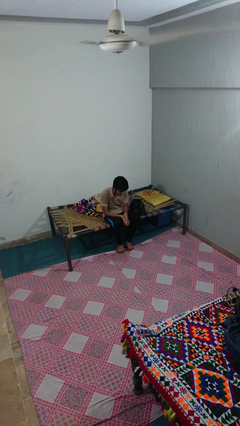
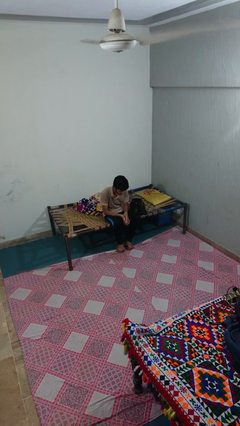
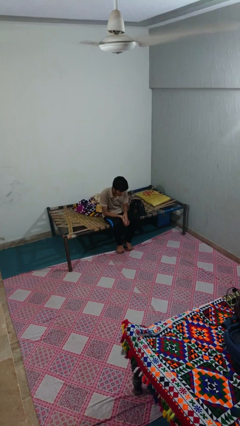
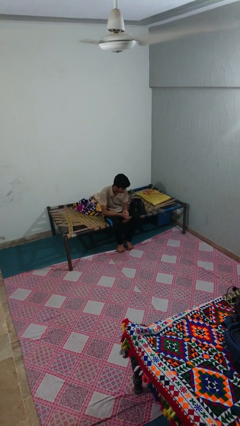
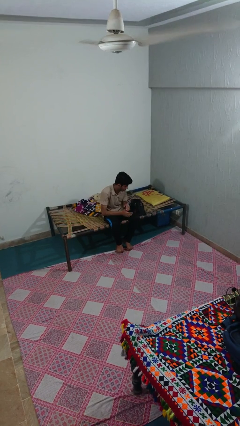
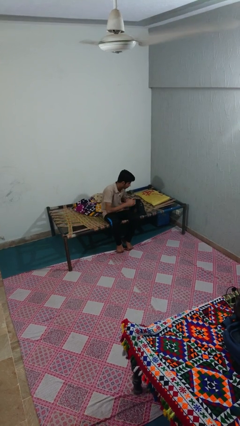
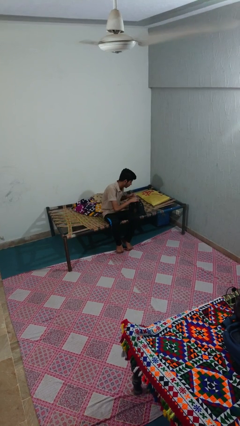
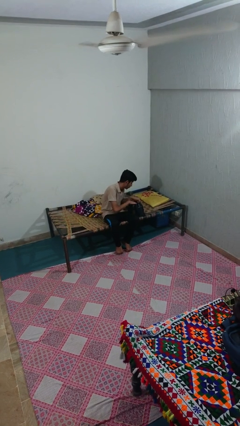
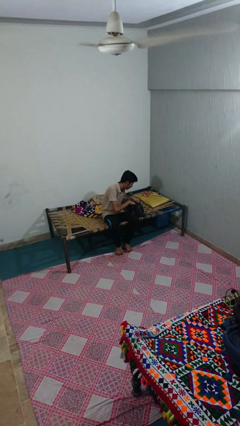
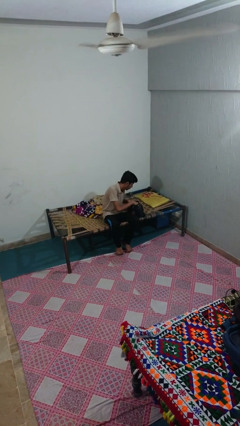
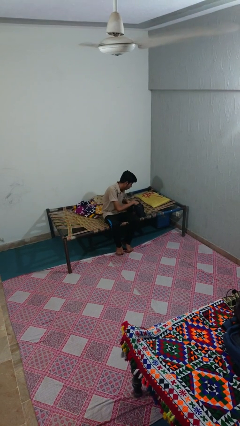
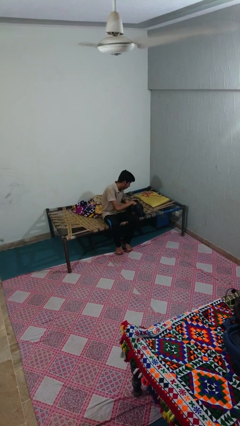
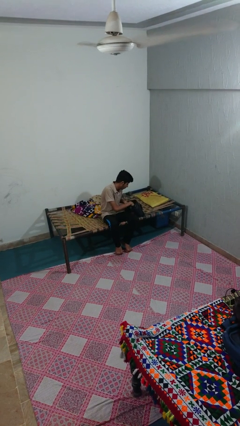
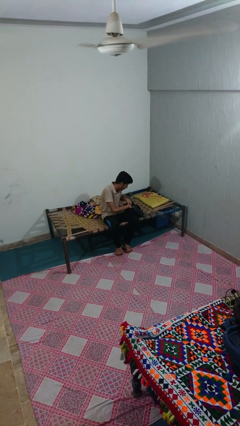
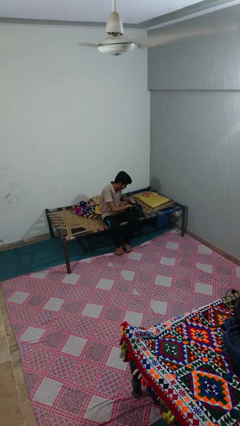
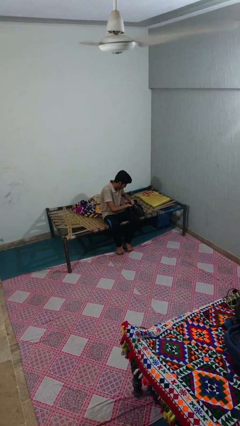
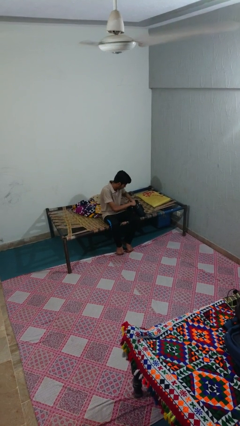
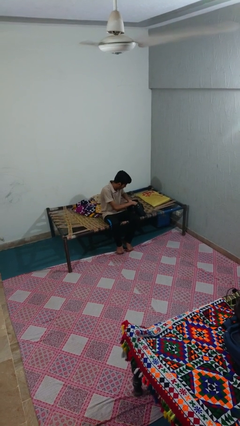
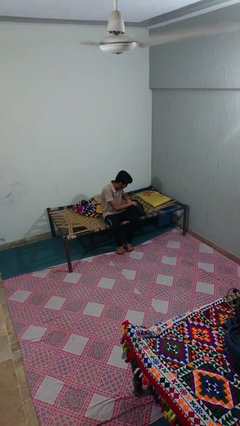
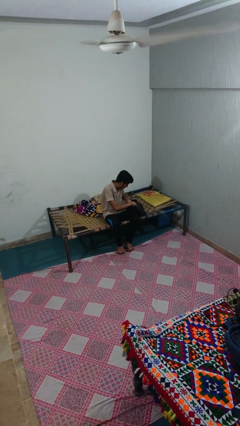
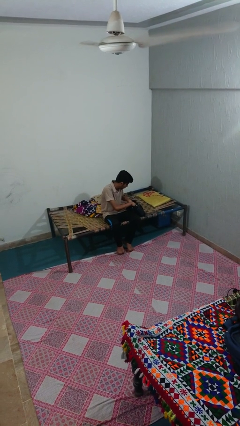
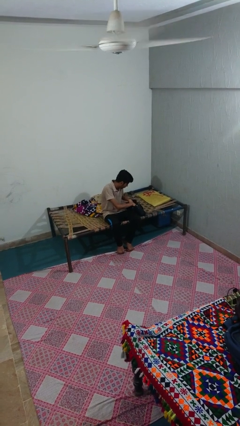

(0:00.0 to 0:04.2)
person searches in purse

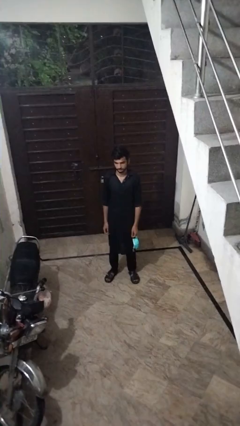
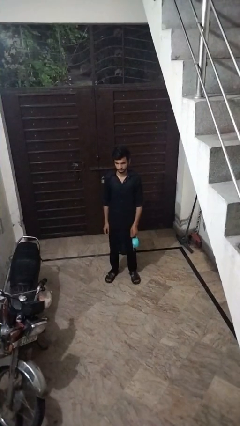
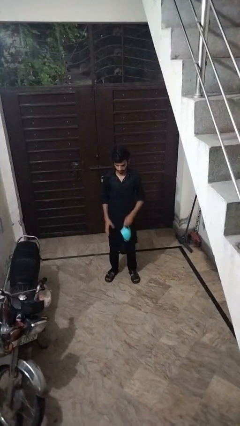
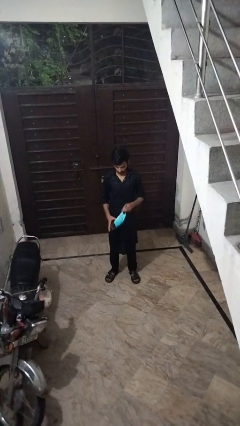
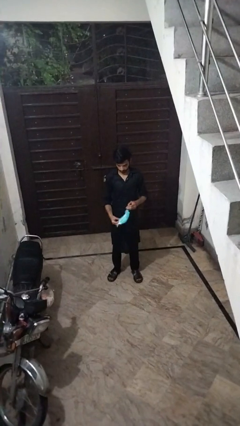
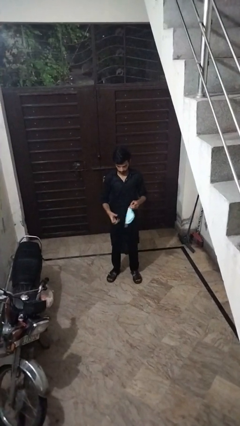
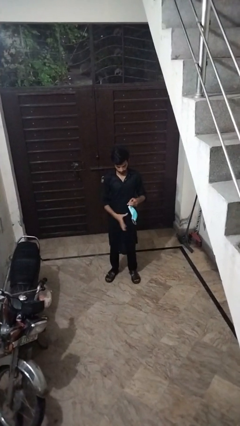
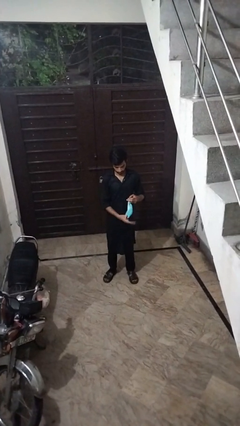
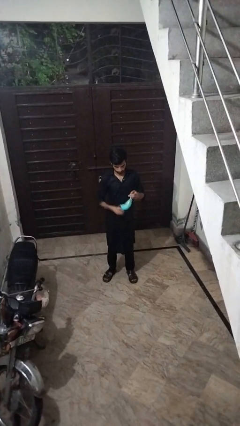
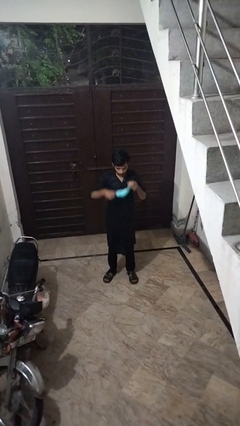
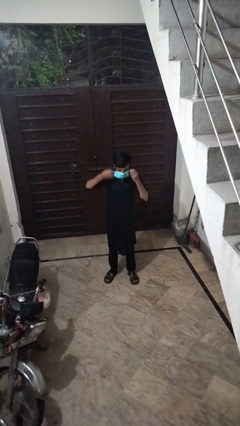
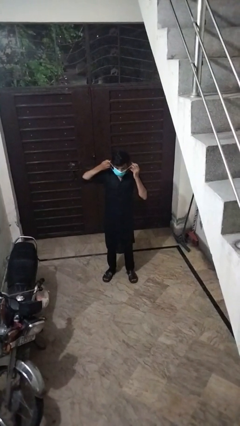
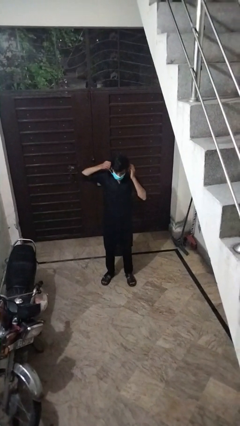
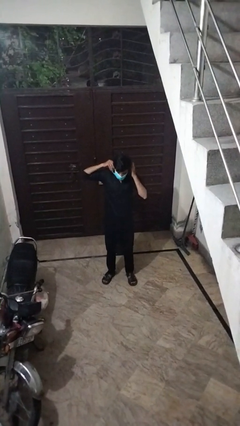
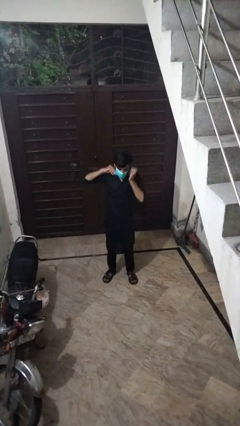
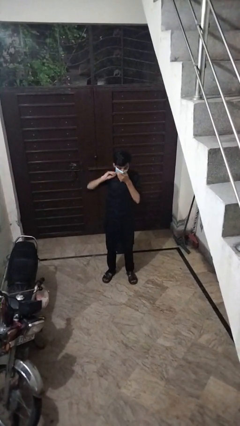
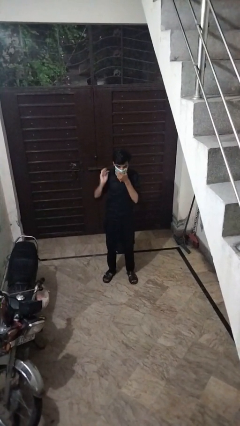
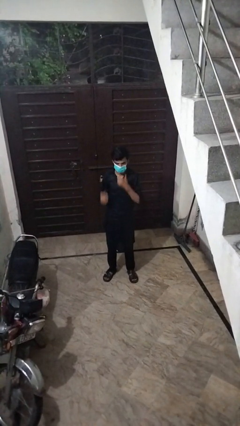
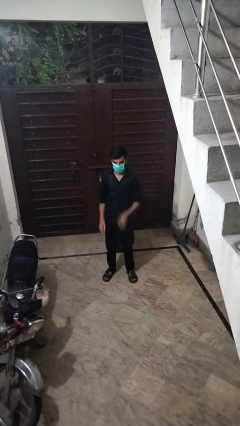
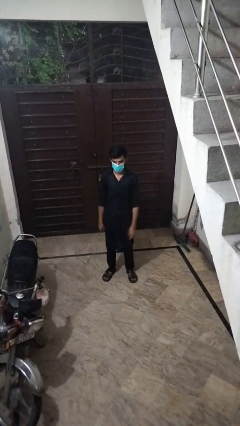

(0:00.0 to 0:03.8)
person puts on facemask

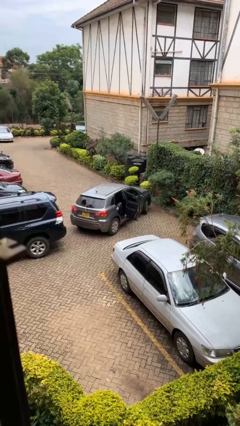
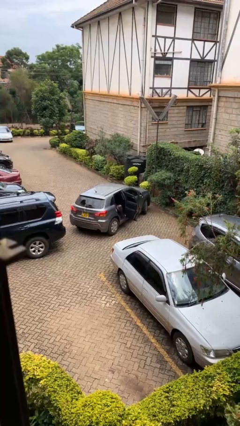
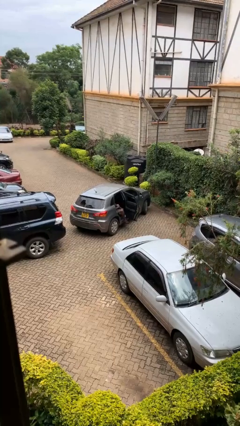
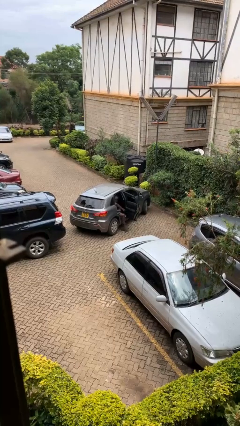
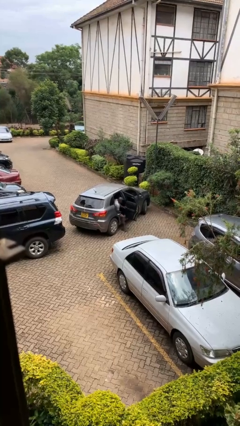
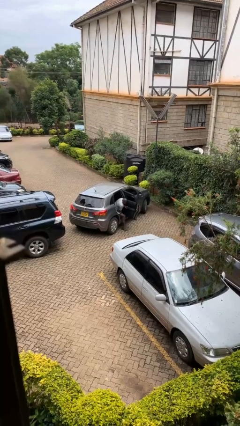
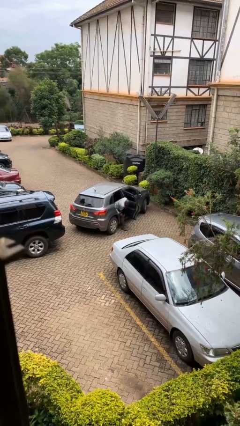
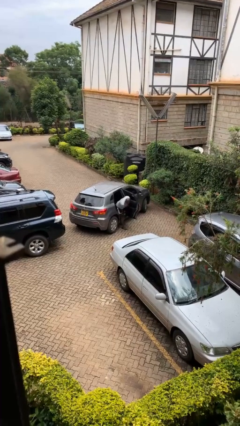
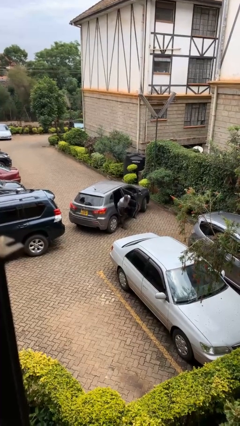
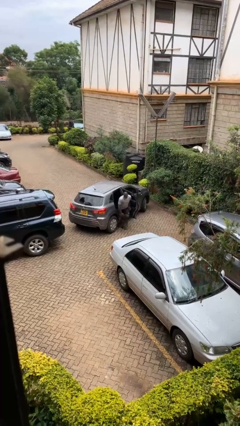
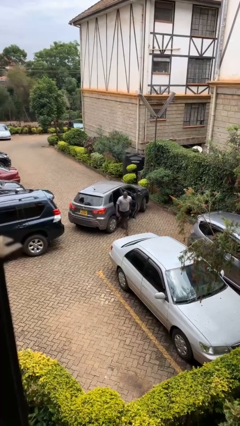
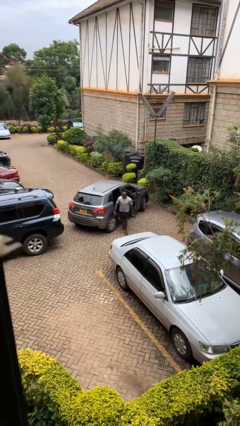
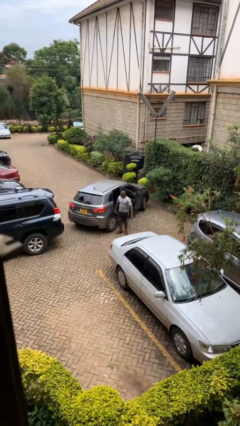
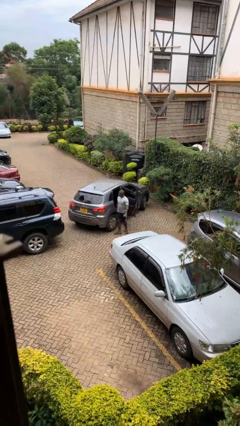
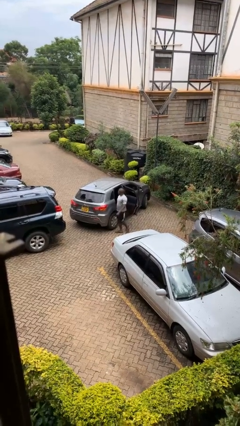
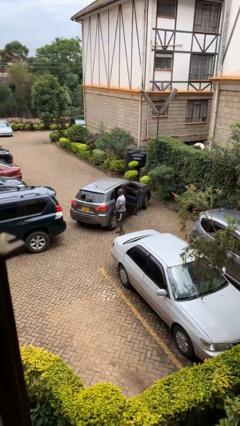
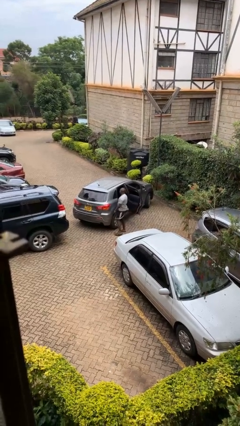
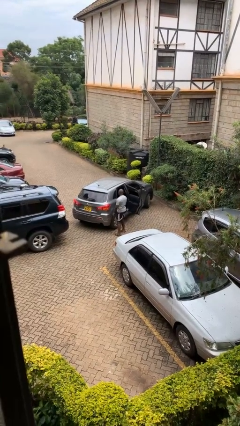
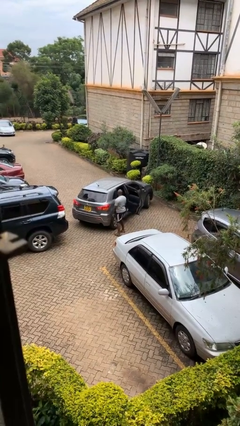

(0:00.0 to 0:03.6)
person exits car

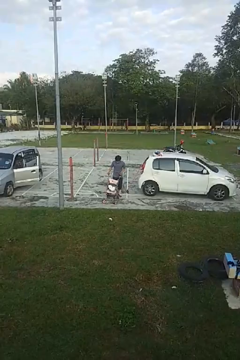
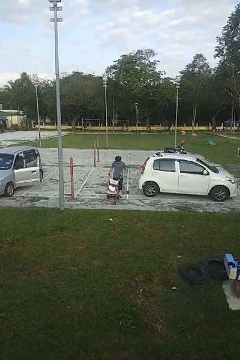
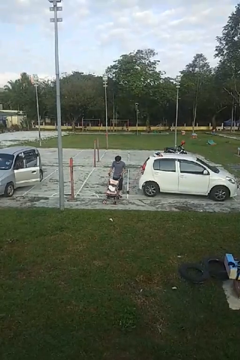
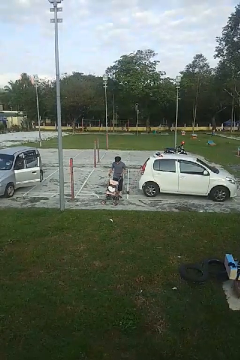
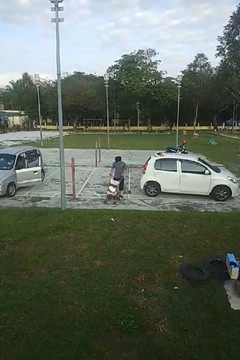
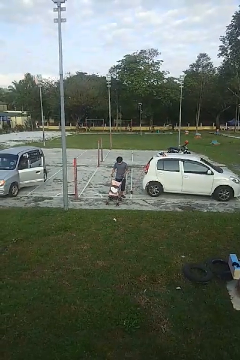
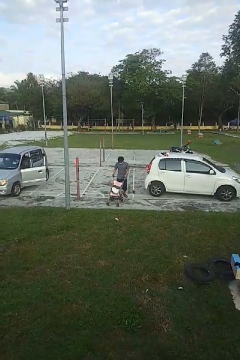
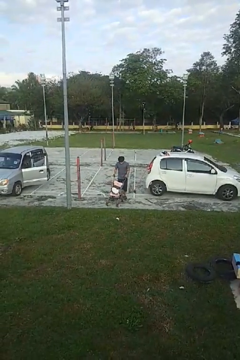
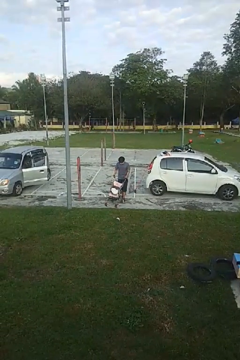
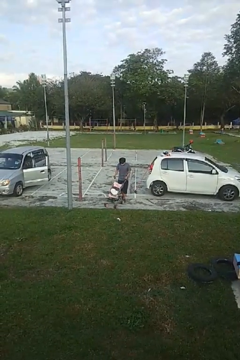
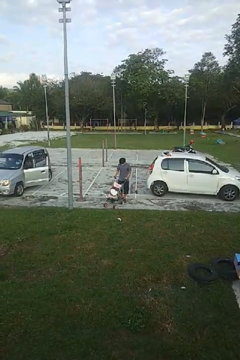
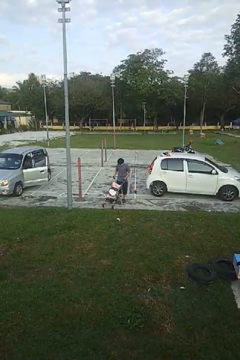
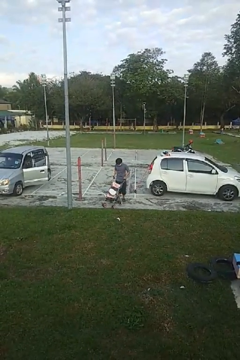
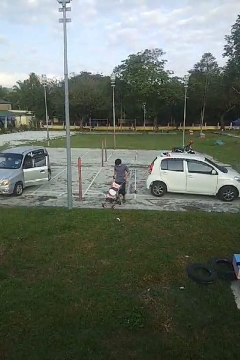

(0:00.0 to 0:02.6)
person pushes wheeled cart

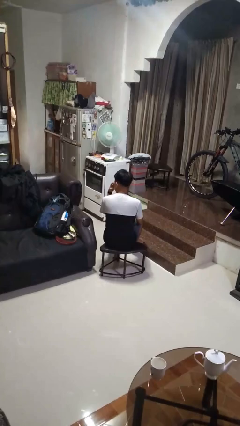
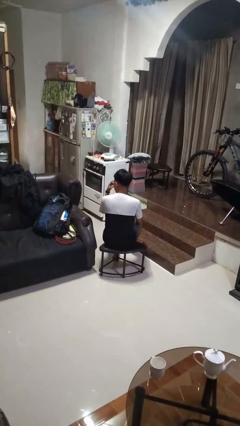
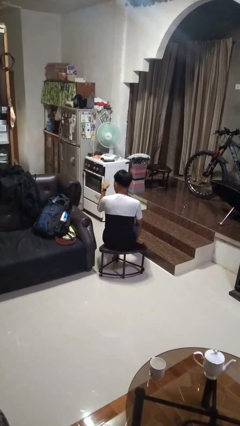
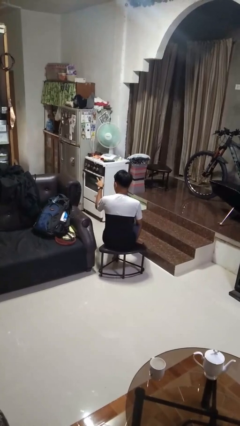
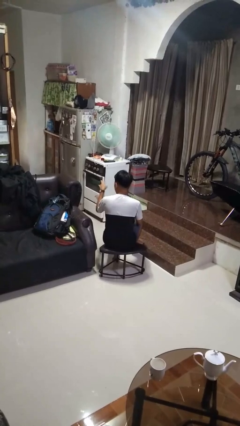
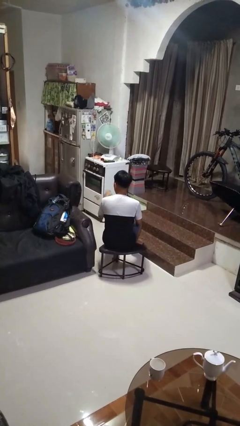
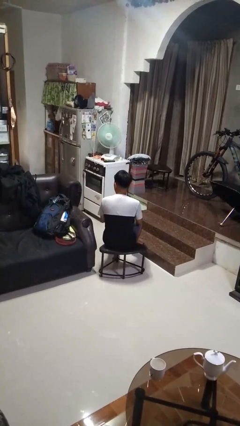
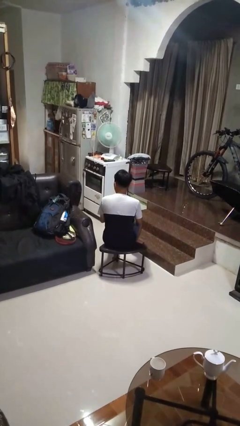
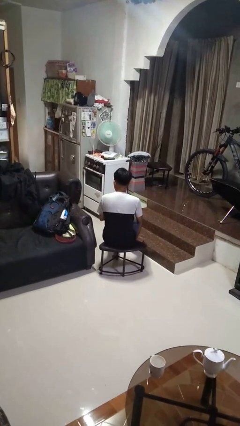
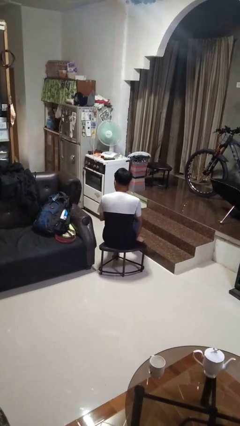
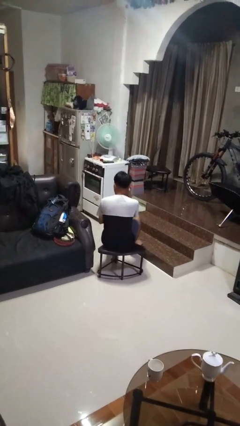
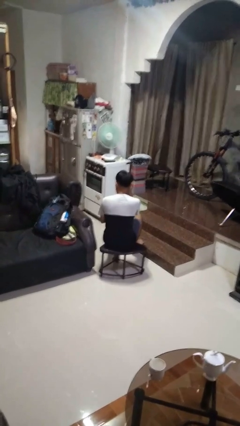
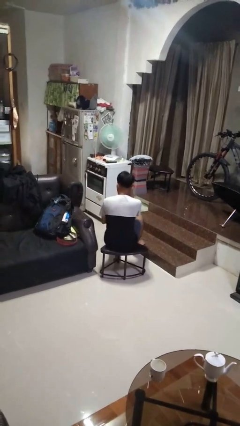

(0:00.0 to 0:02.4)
person gestures watch closely

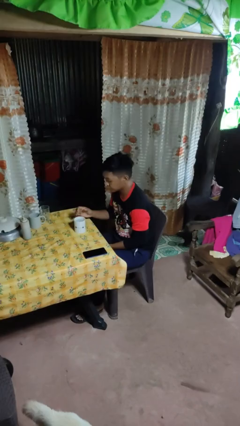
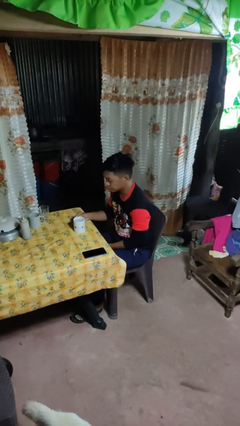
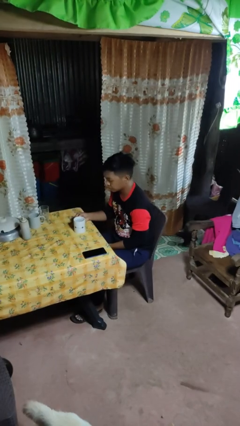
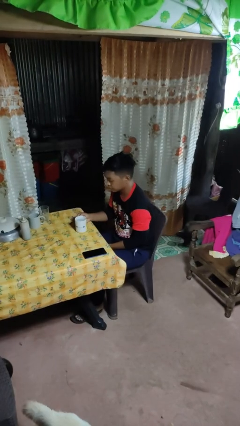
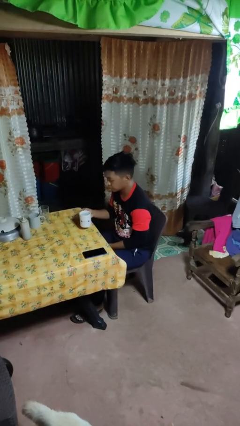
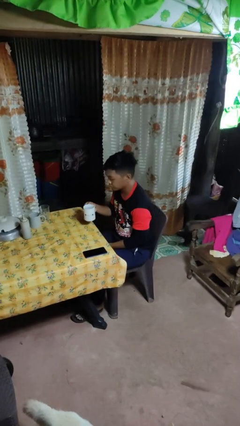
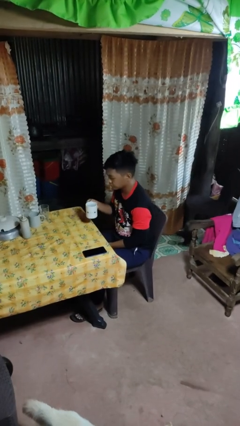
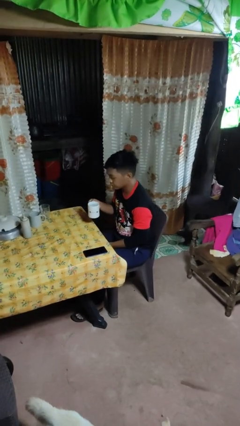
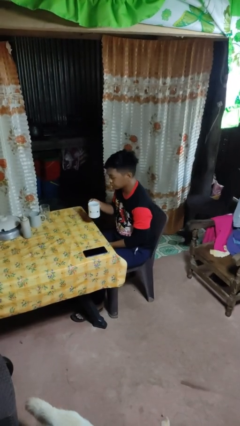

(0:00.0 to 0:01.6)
person picks up object from table
